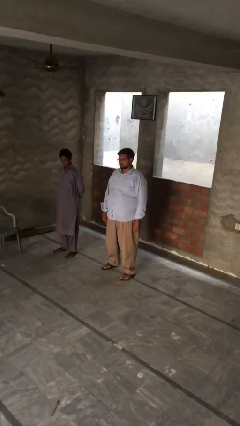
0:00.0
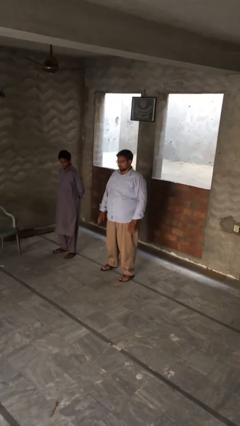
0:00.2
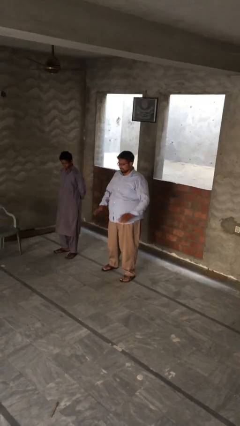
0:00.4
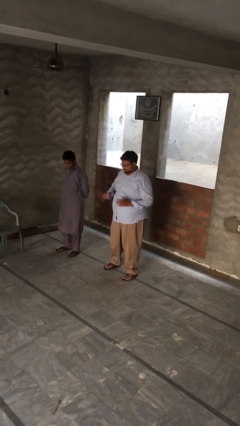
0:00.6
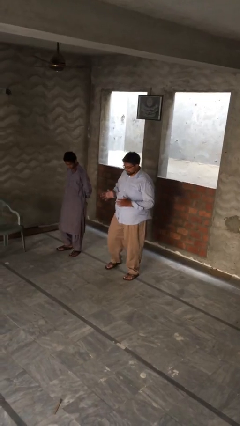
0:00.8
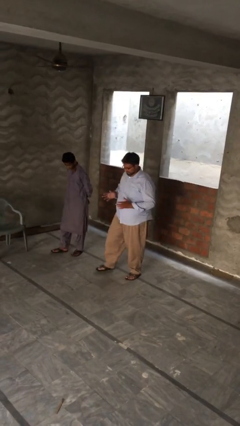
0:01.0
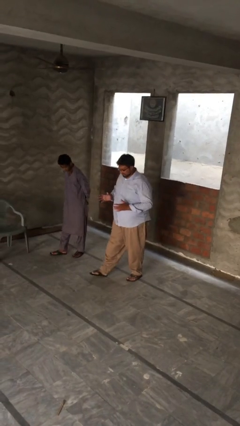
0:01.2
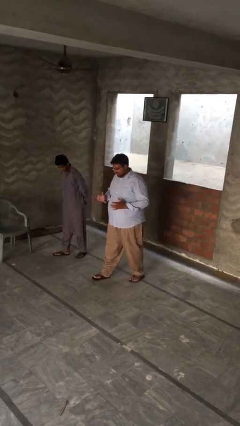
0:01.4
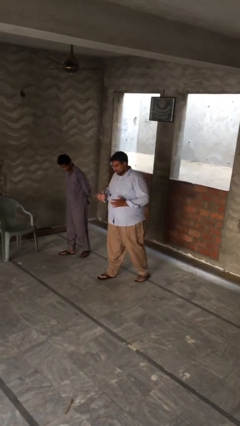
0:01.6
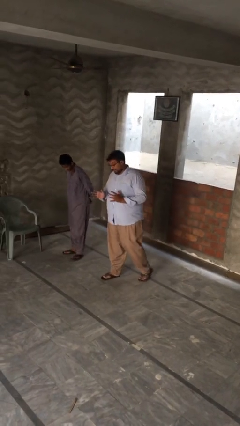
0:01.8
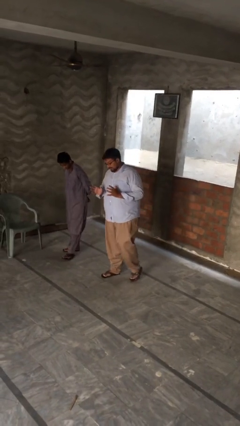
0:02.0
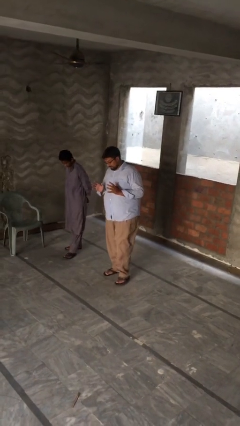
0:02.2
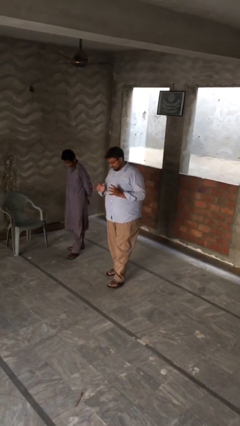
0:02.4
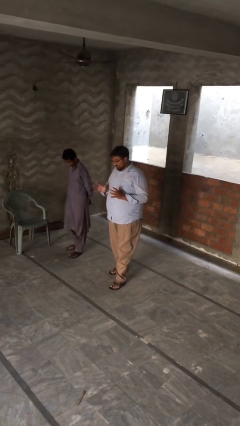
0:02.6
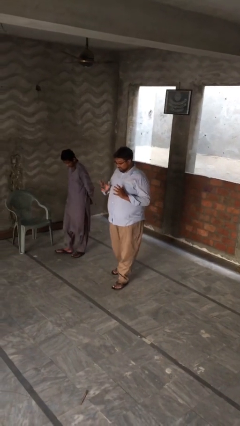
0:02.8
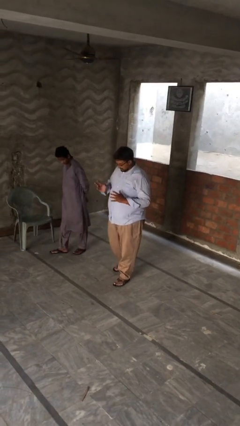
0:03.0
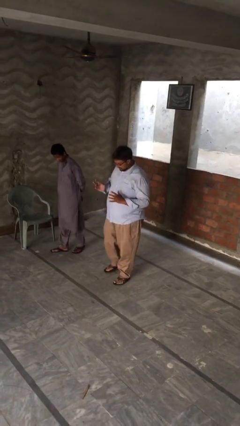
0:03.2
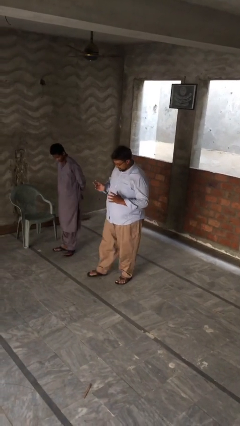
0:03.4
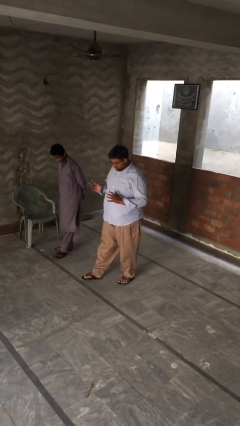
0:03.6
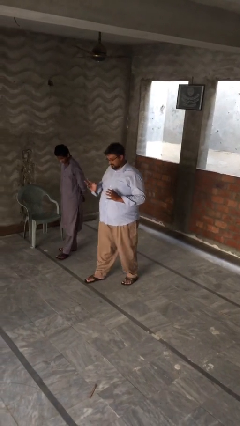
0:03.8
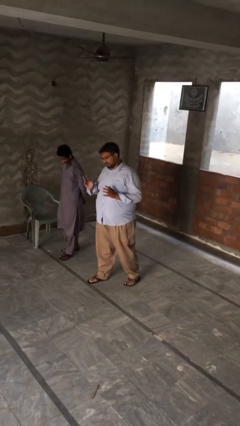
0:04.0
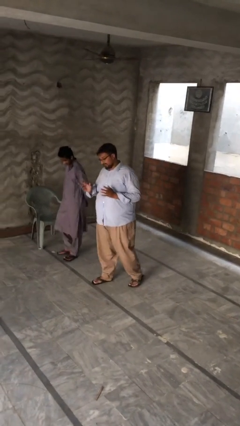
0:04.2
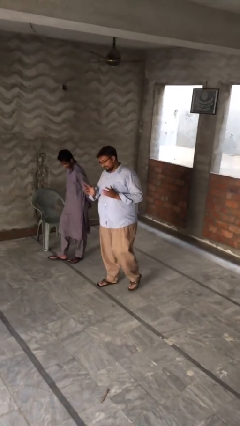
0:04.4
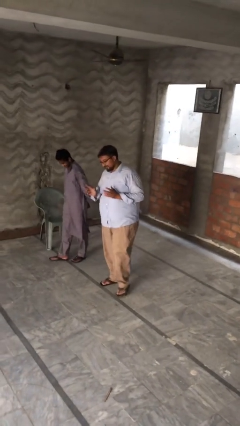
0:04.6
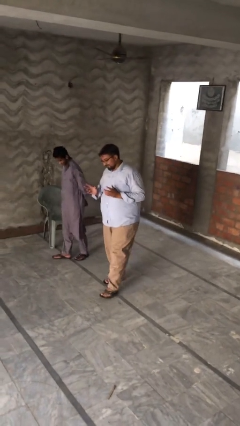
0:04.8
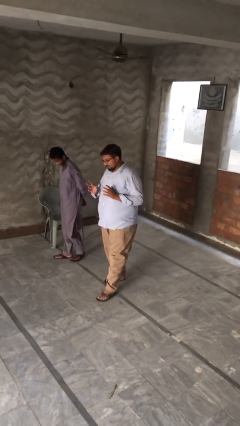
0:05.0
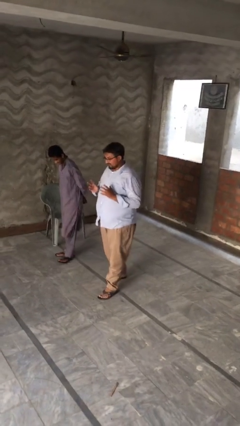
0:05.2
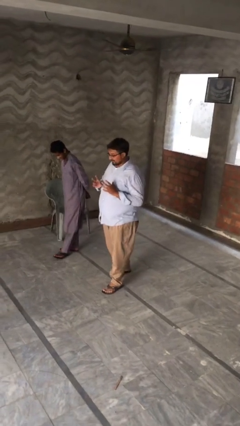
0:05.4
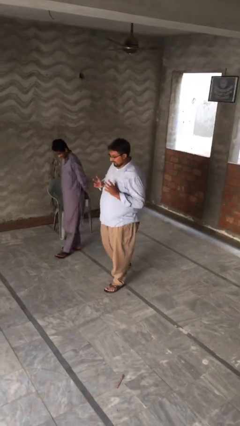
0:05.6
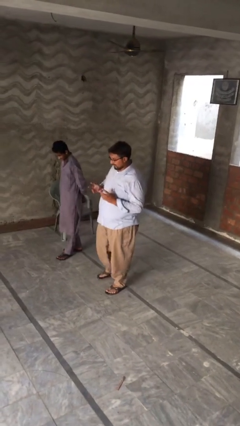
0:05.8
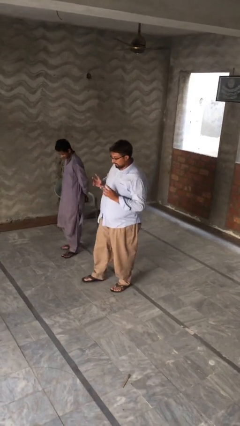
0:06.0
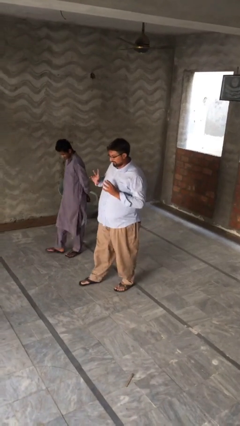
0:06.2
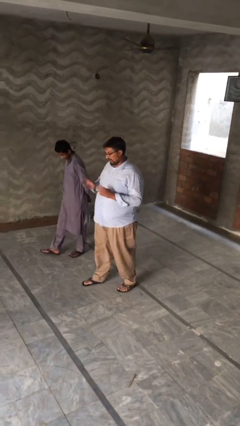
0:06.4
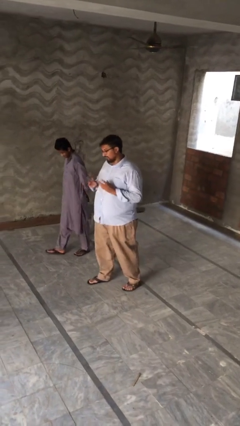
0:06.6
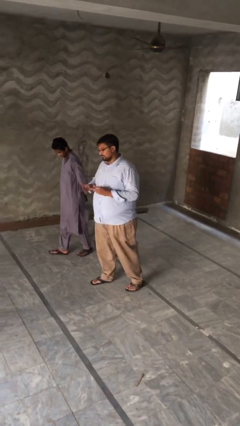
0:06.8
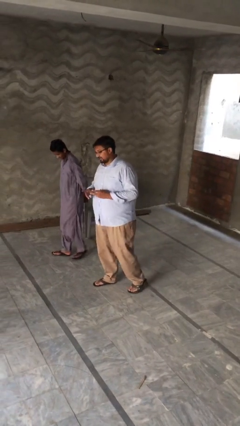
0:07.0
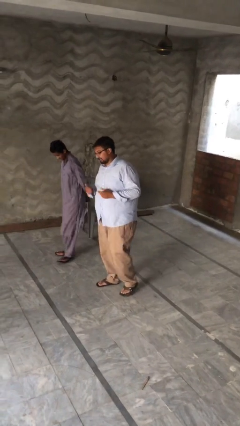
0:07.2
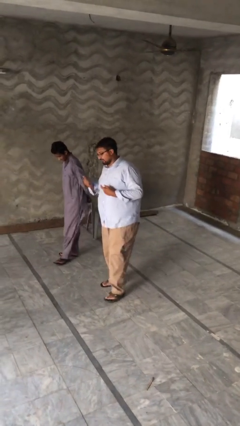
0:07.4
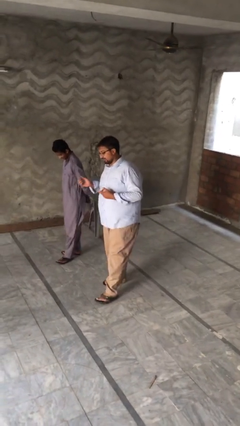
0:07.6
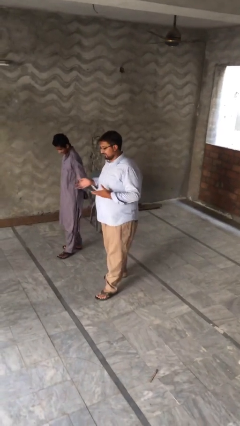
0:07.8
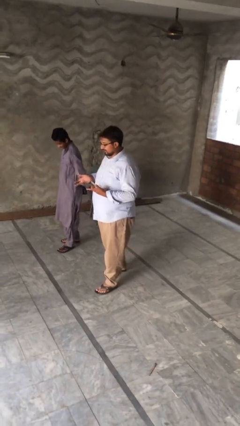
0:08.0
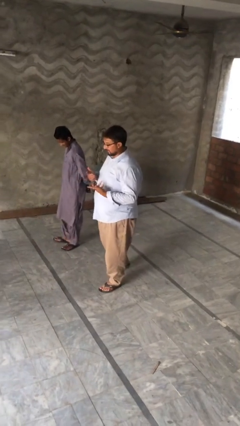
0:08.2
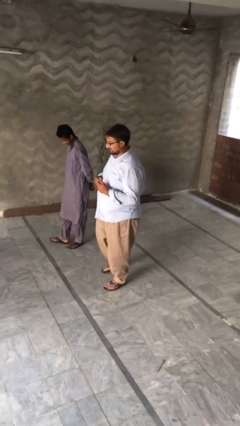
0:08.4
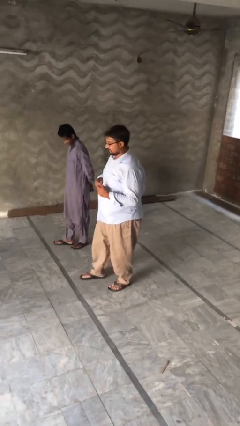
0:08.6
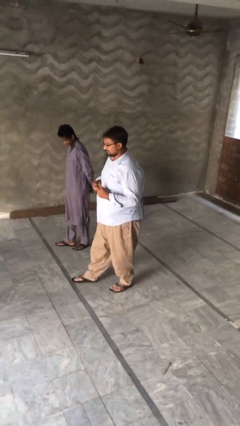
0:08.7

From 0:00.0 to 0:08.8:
person talks to person

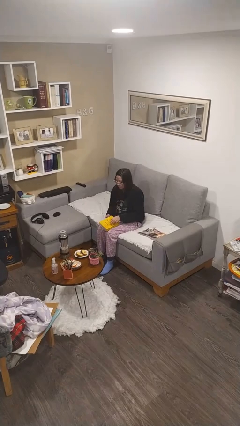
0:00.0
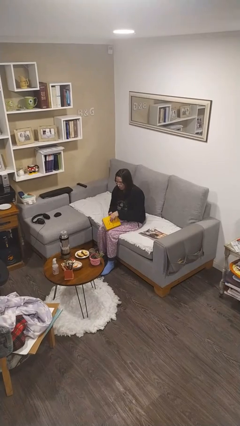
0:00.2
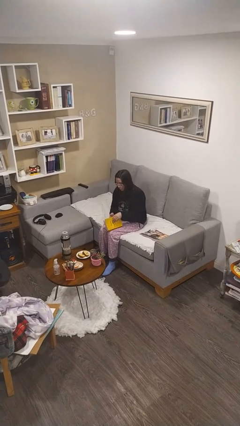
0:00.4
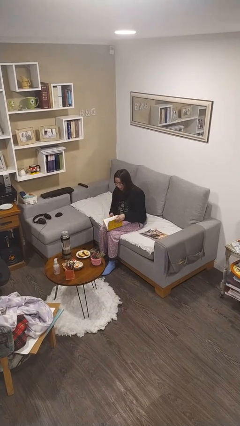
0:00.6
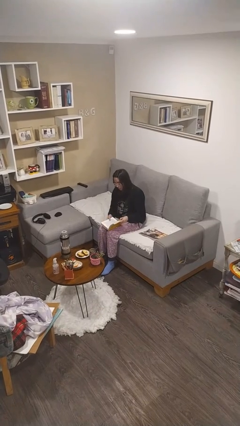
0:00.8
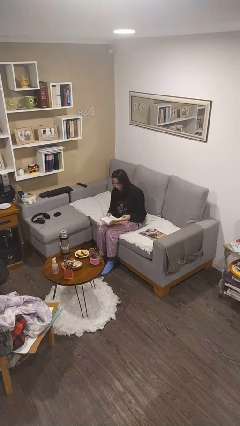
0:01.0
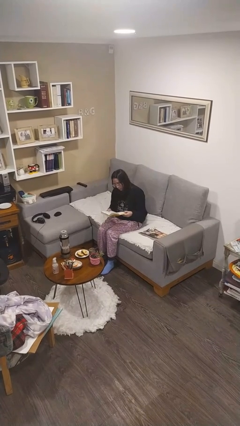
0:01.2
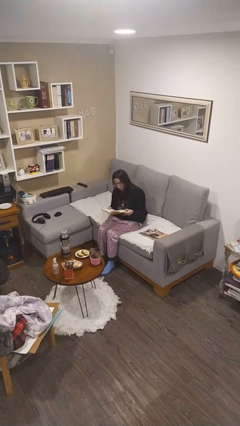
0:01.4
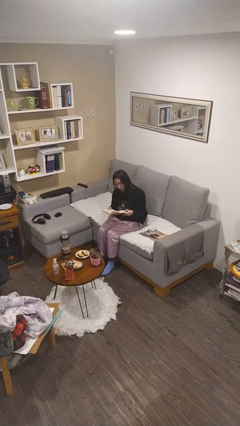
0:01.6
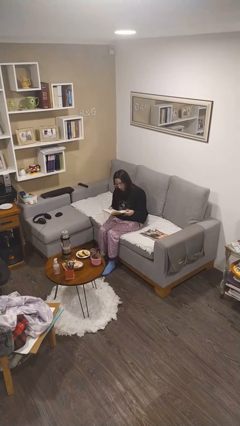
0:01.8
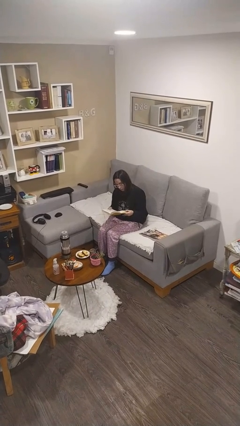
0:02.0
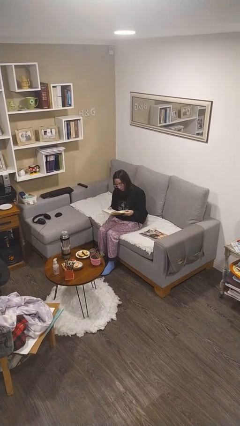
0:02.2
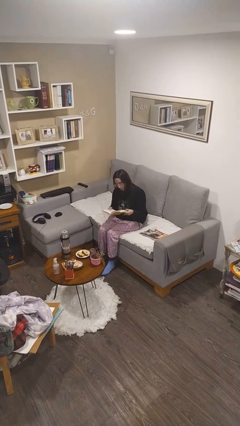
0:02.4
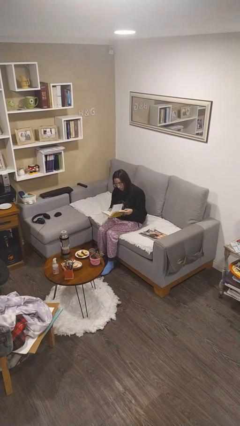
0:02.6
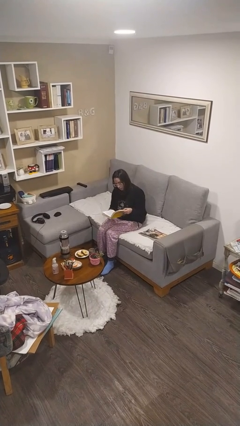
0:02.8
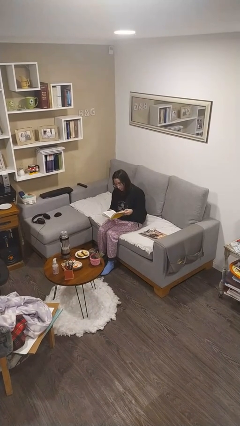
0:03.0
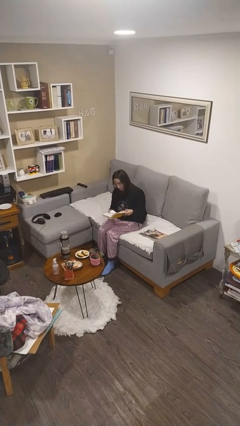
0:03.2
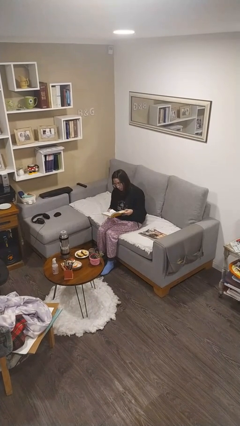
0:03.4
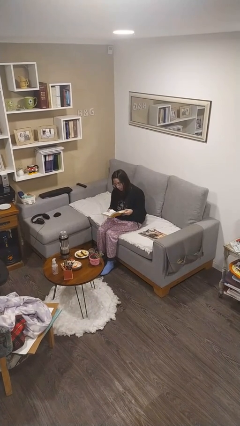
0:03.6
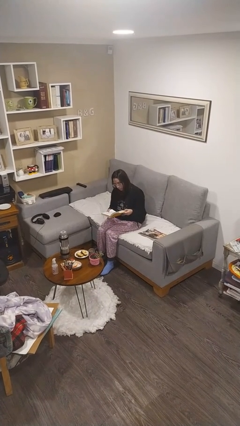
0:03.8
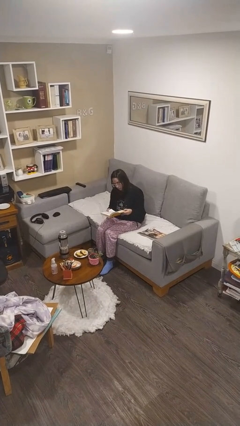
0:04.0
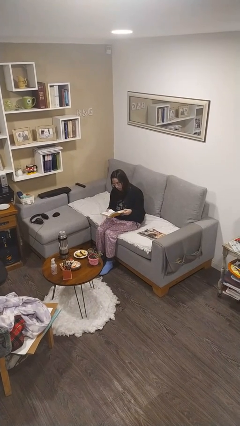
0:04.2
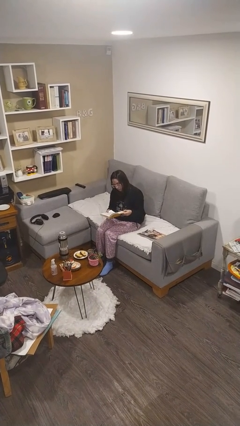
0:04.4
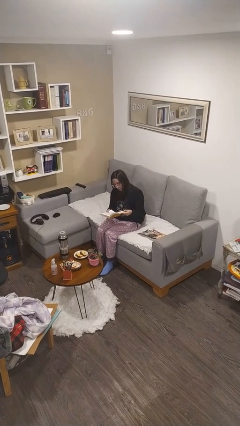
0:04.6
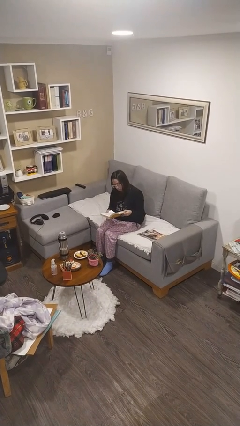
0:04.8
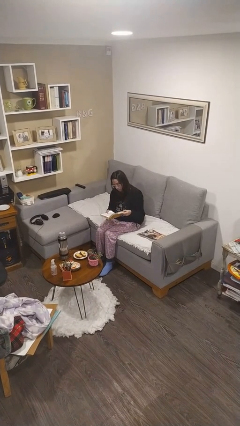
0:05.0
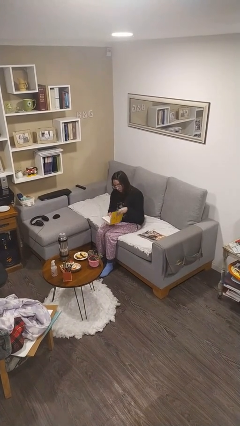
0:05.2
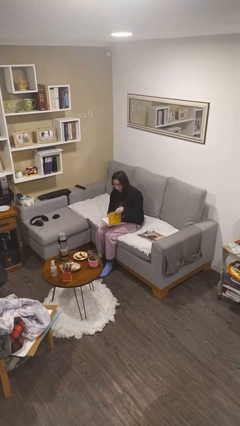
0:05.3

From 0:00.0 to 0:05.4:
person reads book

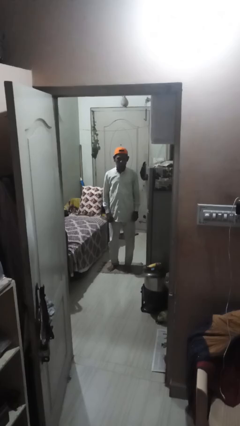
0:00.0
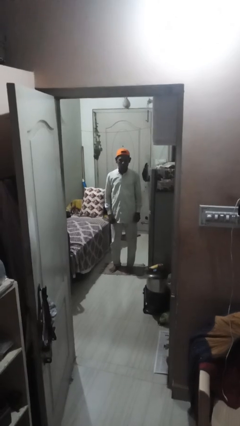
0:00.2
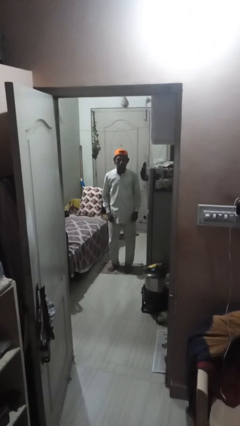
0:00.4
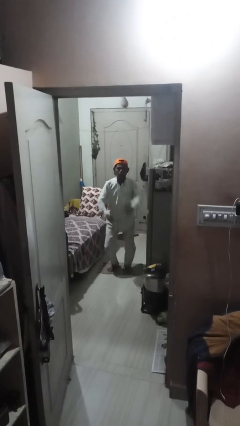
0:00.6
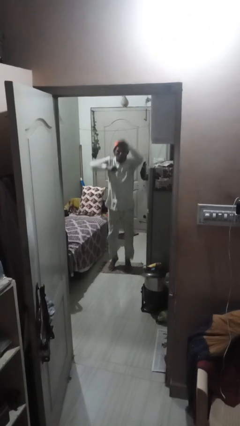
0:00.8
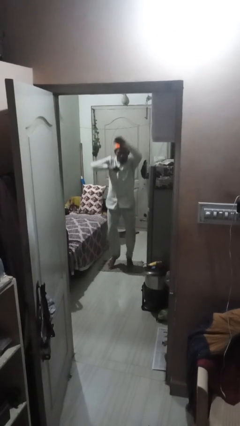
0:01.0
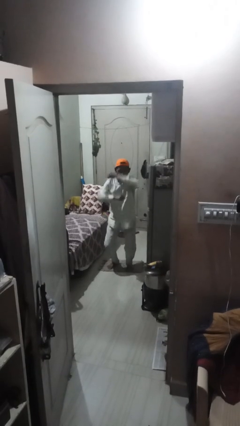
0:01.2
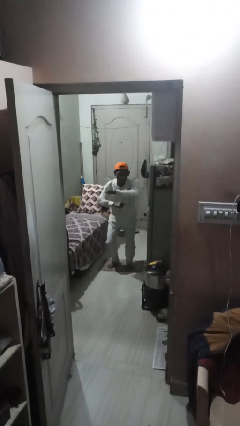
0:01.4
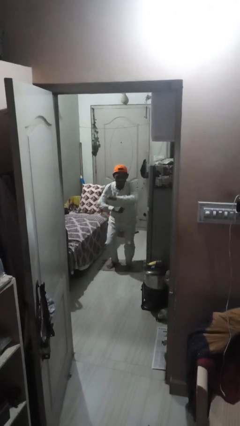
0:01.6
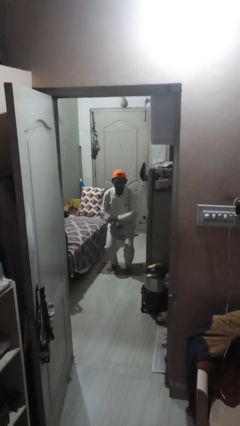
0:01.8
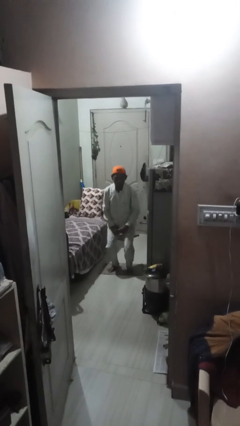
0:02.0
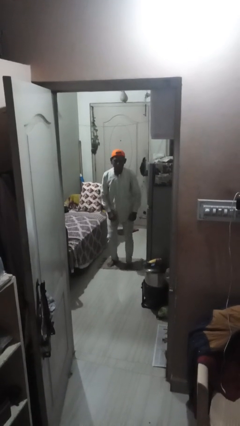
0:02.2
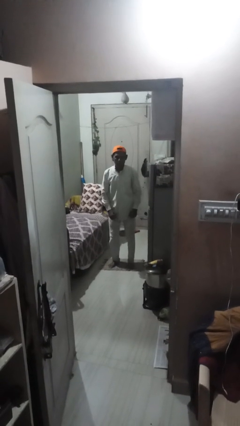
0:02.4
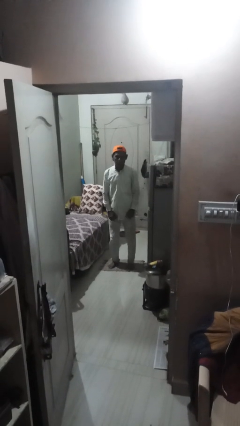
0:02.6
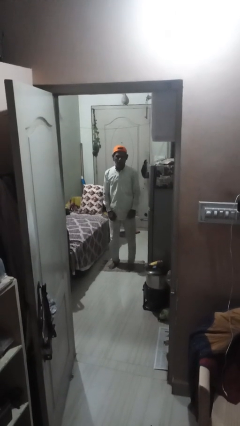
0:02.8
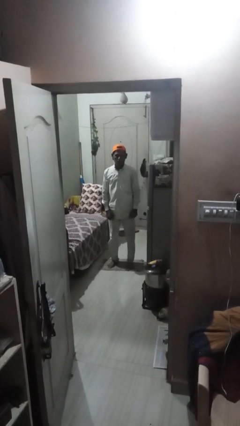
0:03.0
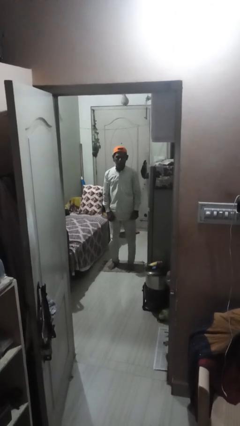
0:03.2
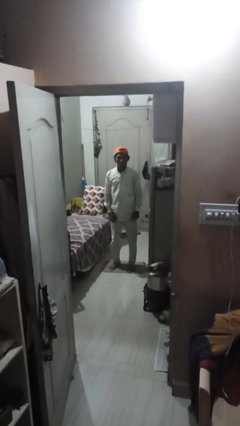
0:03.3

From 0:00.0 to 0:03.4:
person jumps

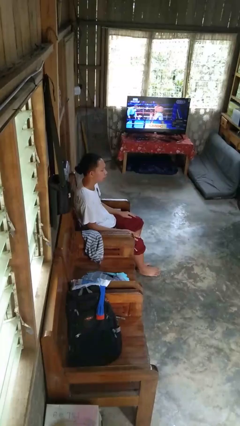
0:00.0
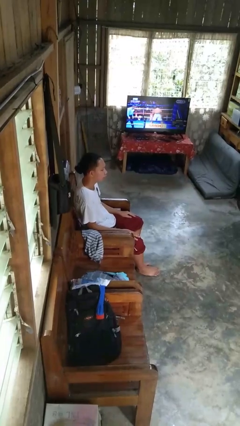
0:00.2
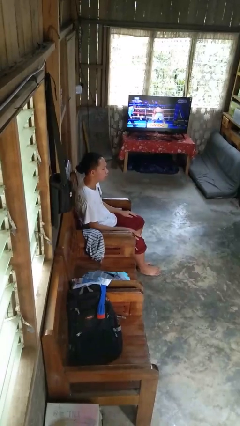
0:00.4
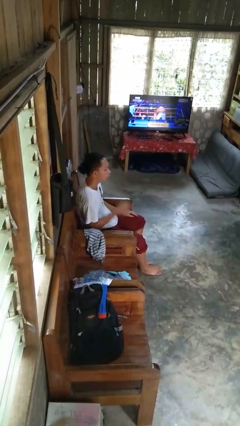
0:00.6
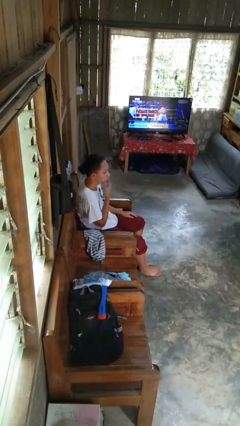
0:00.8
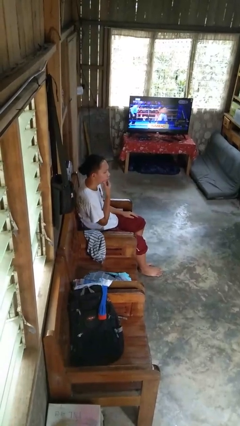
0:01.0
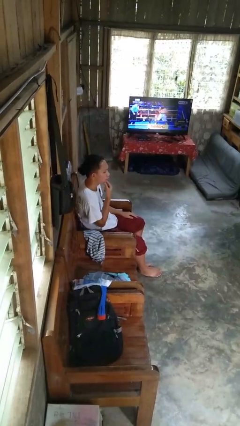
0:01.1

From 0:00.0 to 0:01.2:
person strokes chin
